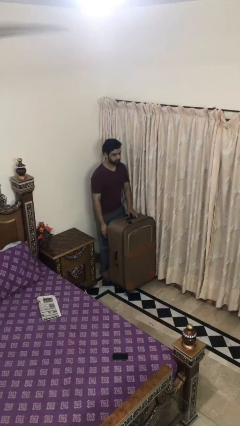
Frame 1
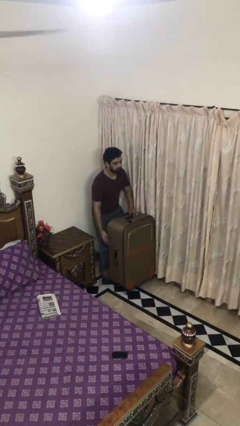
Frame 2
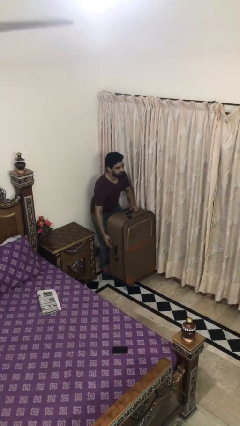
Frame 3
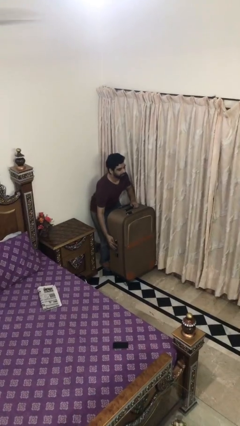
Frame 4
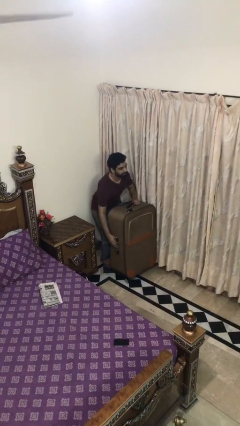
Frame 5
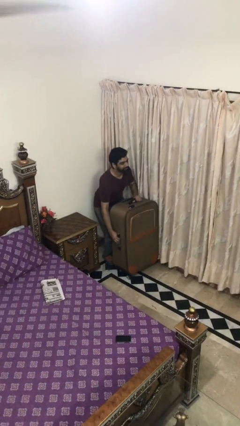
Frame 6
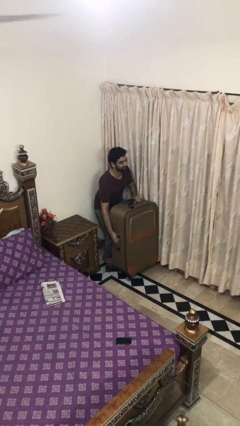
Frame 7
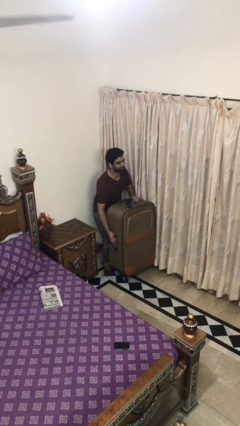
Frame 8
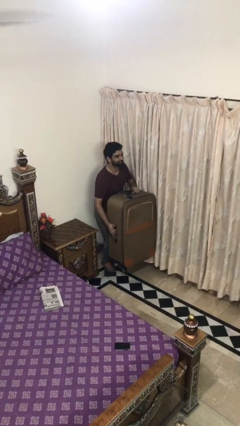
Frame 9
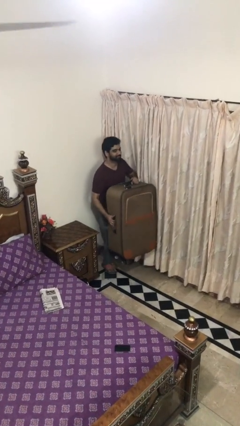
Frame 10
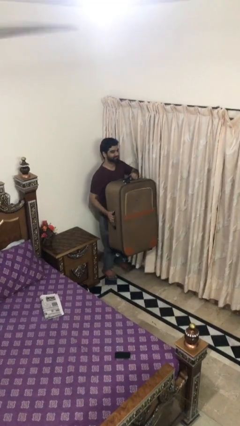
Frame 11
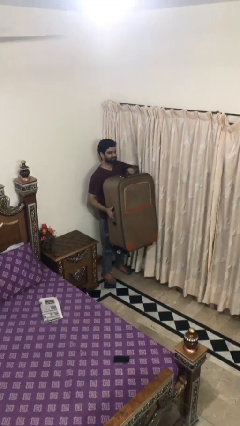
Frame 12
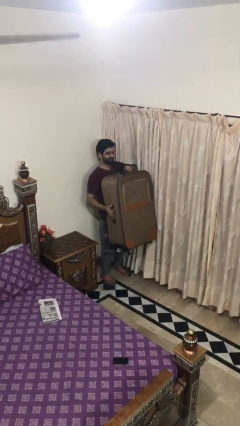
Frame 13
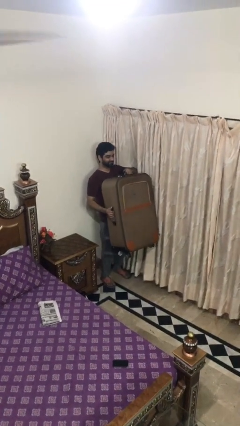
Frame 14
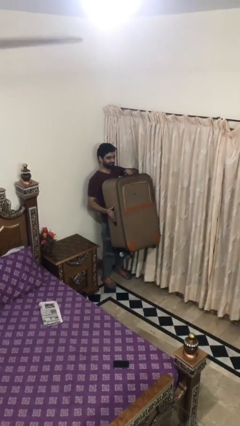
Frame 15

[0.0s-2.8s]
person picks up object from floor

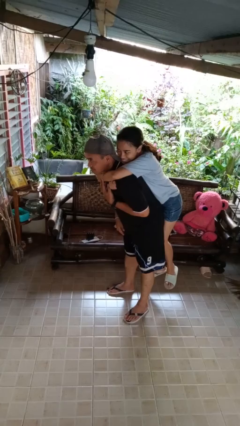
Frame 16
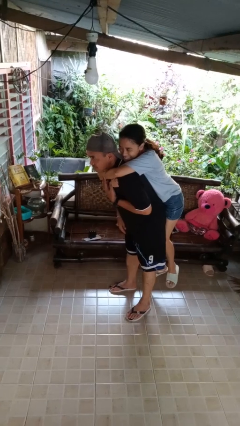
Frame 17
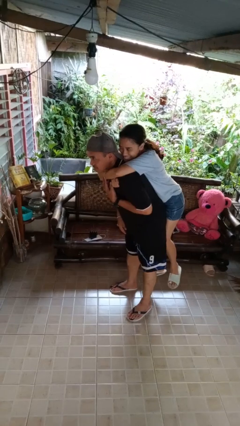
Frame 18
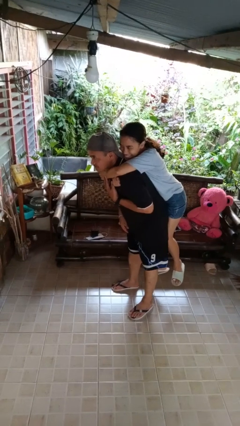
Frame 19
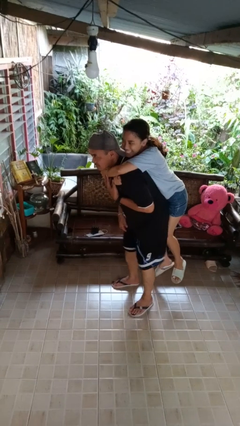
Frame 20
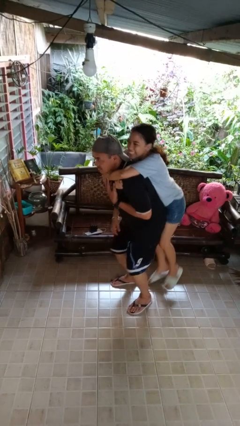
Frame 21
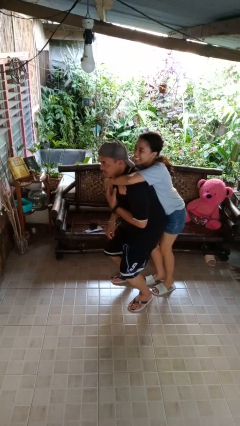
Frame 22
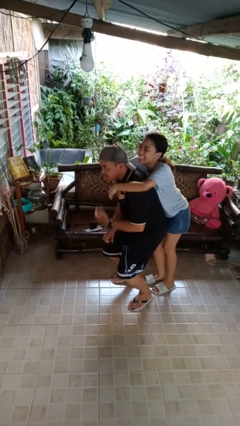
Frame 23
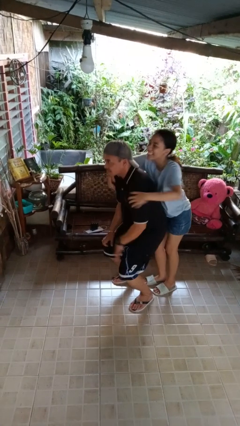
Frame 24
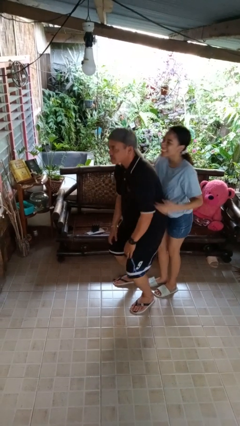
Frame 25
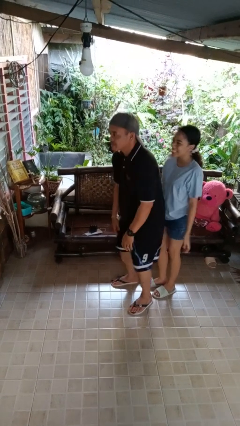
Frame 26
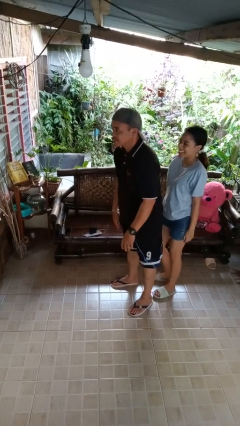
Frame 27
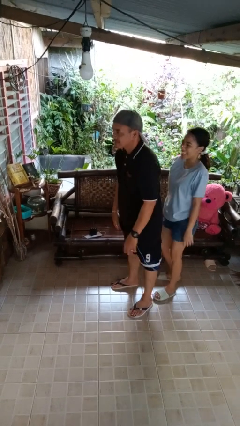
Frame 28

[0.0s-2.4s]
person puts down person

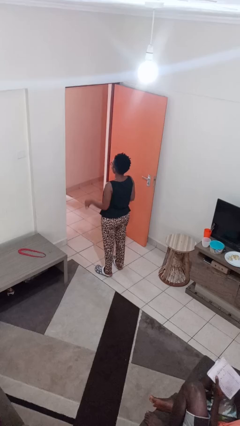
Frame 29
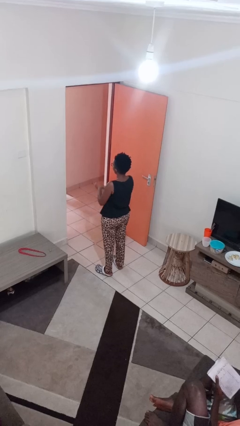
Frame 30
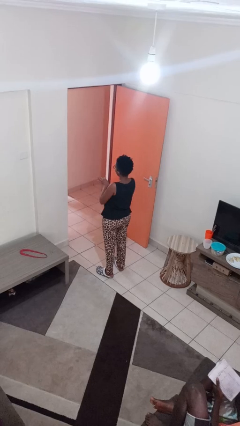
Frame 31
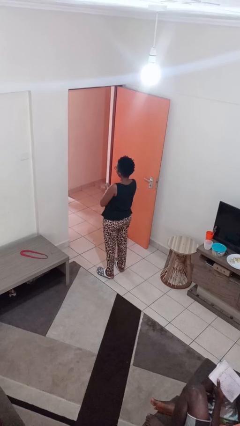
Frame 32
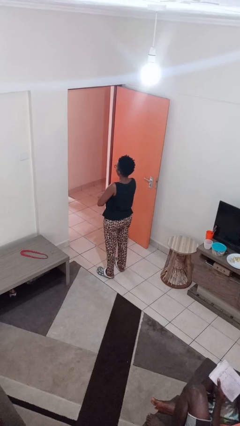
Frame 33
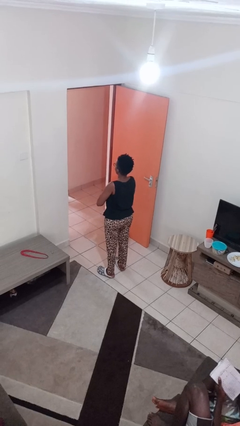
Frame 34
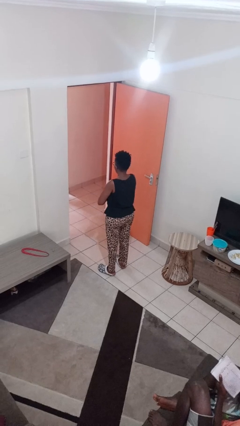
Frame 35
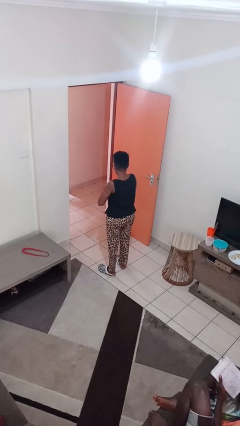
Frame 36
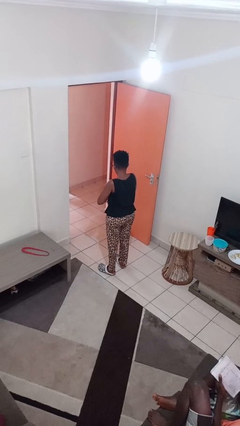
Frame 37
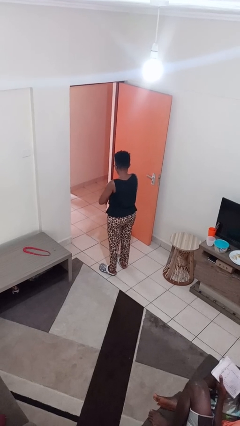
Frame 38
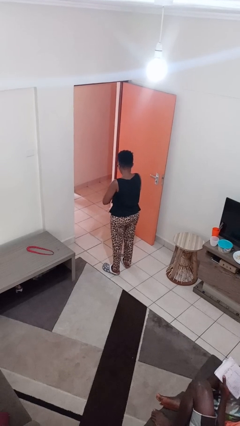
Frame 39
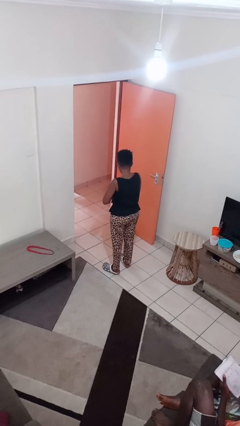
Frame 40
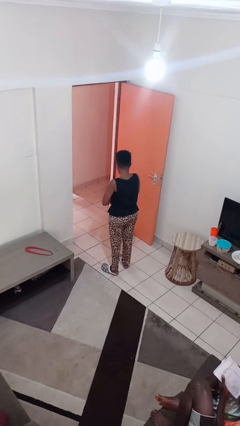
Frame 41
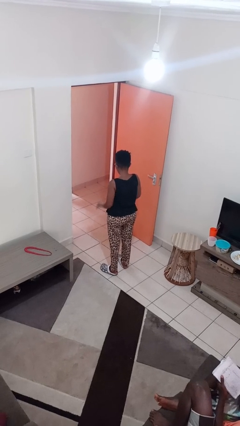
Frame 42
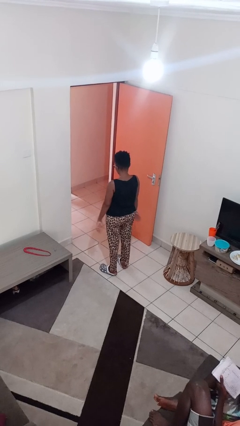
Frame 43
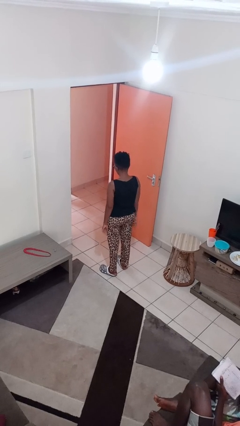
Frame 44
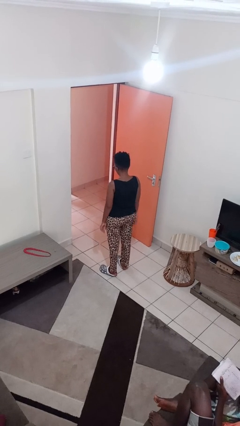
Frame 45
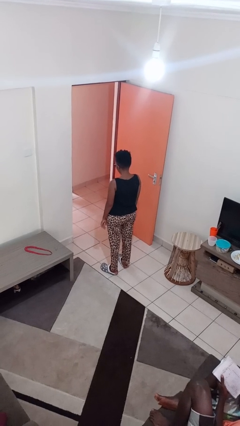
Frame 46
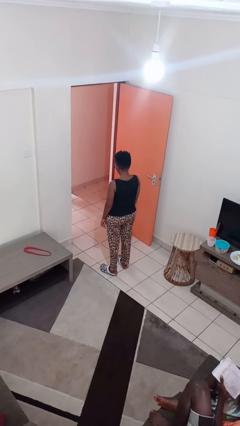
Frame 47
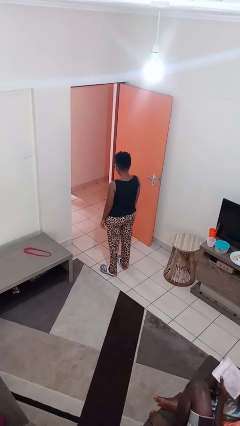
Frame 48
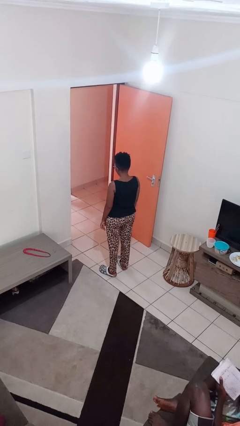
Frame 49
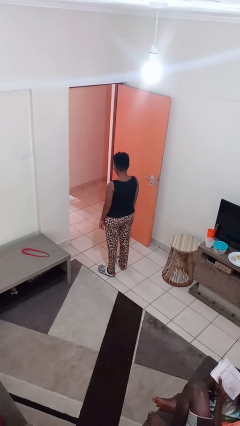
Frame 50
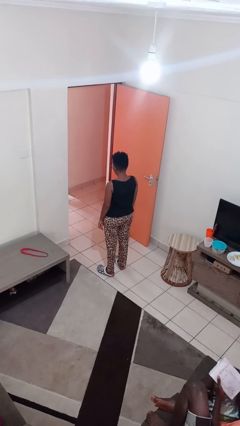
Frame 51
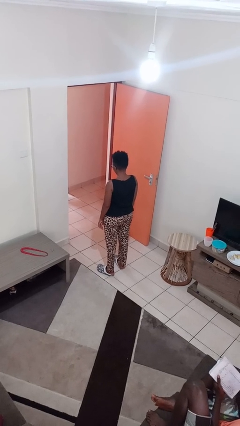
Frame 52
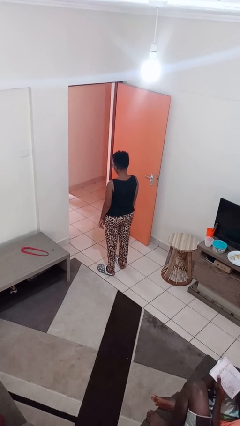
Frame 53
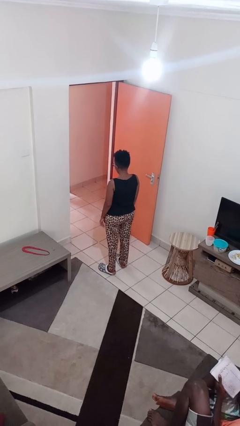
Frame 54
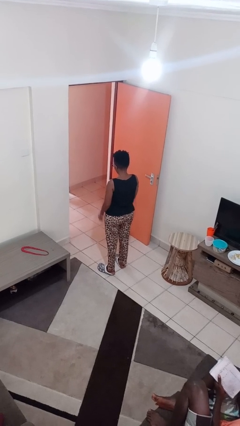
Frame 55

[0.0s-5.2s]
person puts on wristwatch

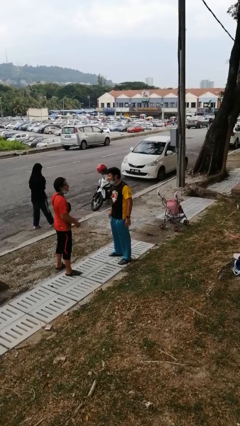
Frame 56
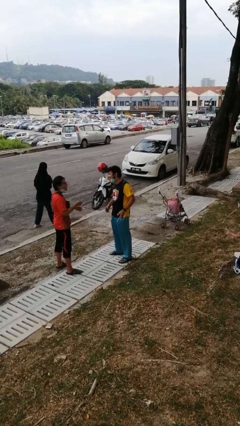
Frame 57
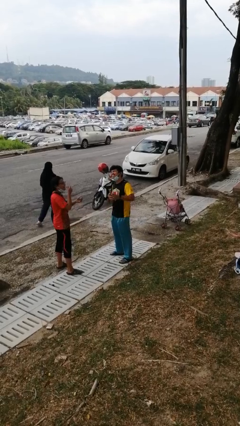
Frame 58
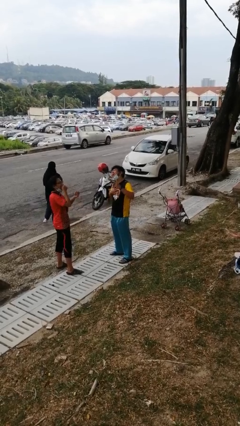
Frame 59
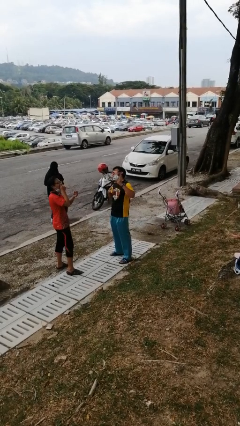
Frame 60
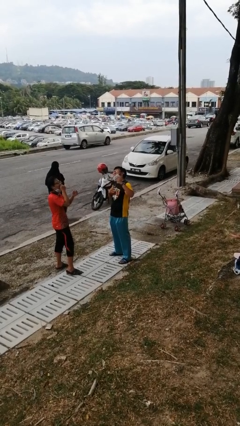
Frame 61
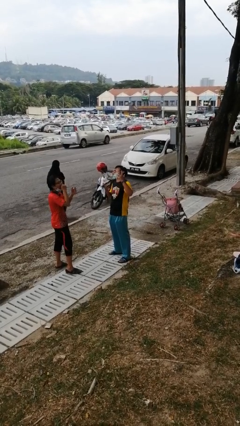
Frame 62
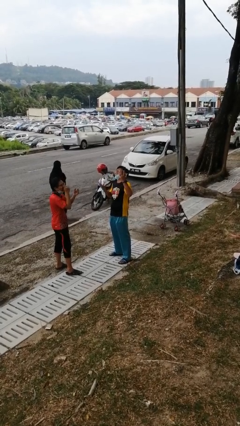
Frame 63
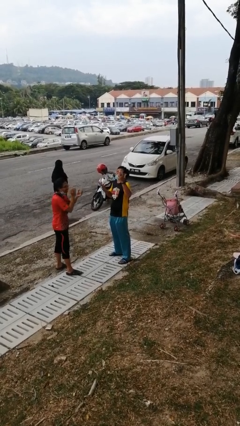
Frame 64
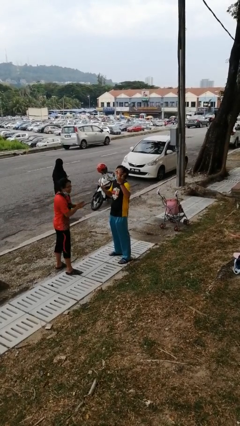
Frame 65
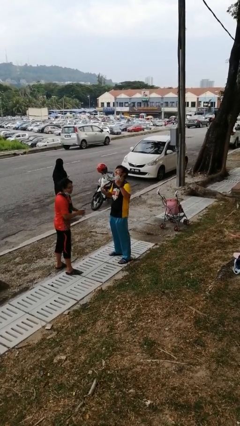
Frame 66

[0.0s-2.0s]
person laughs with person

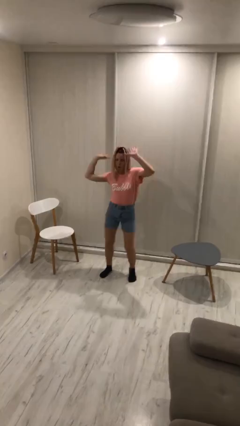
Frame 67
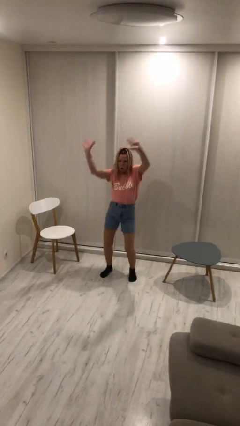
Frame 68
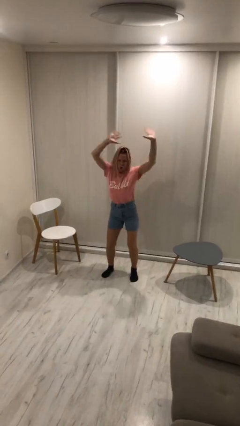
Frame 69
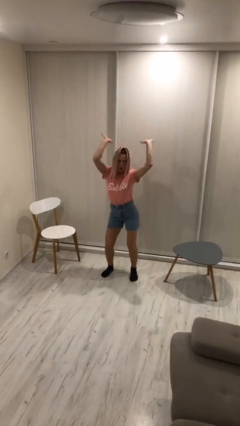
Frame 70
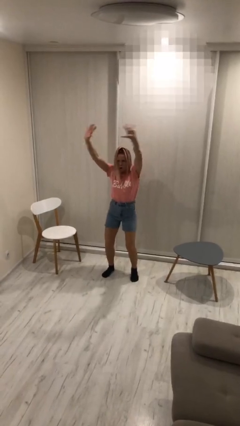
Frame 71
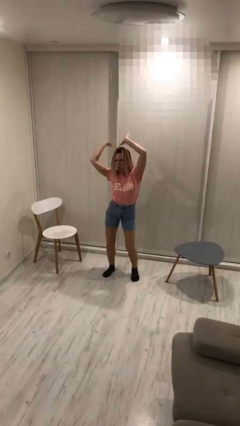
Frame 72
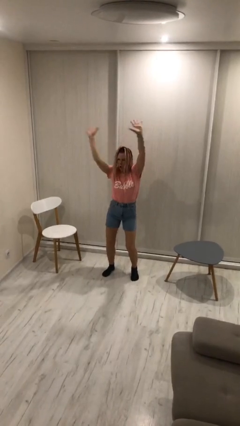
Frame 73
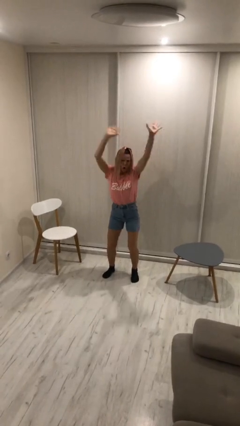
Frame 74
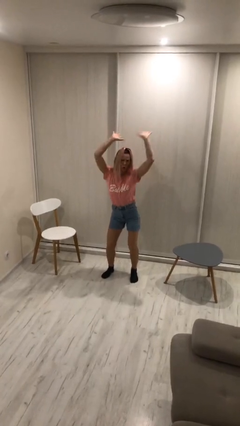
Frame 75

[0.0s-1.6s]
person dances in place

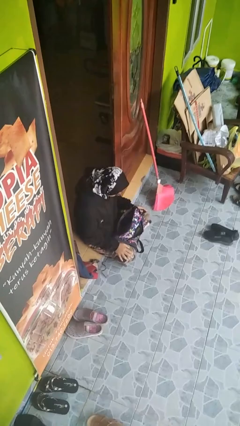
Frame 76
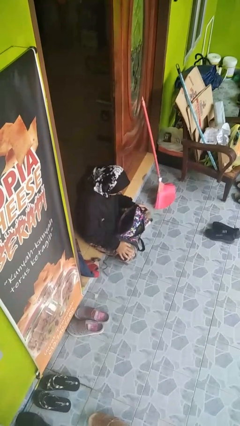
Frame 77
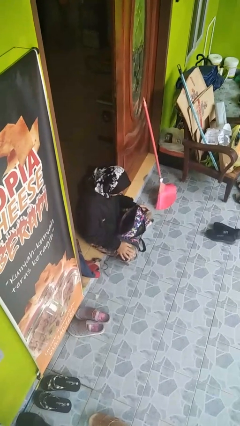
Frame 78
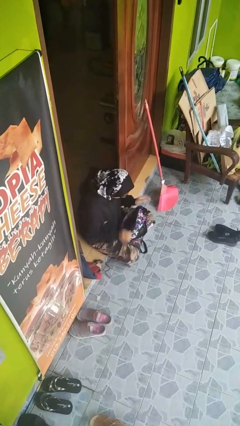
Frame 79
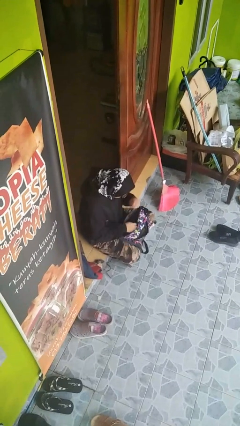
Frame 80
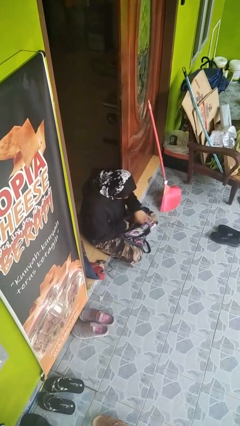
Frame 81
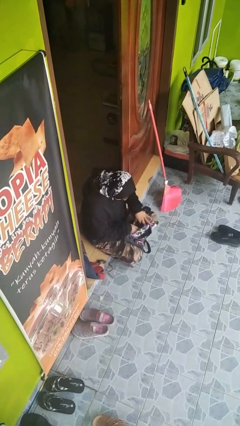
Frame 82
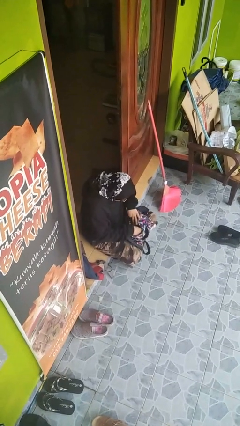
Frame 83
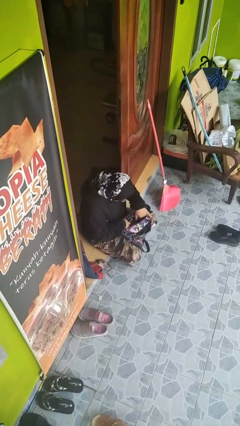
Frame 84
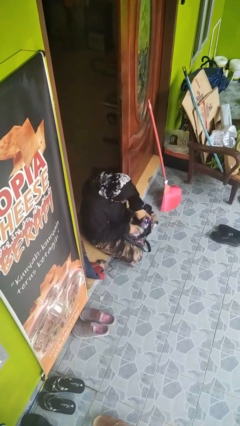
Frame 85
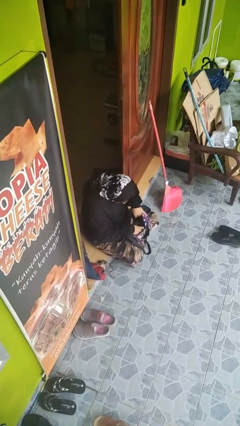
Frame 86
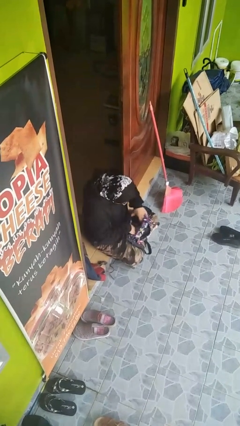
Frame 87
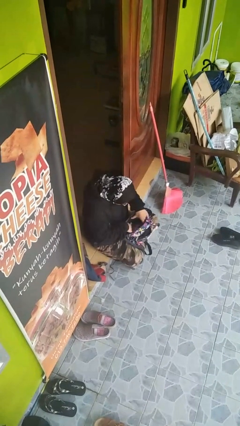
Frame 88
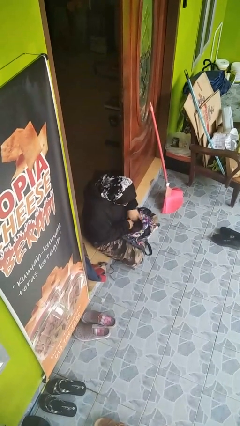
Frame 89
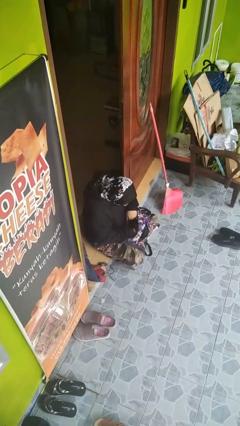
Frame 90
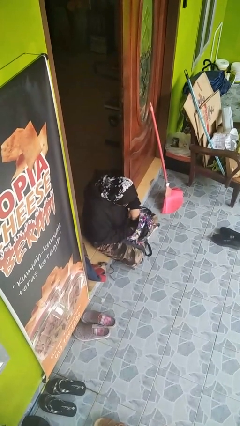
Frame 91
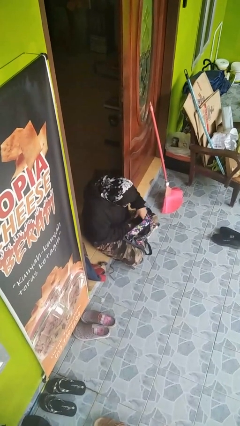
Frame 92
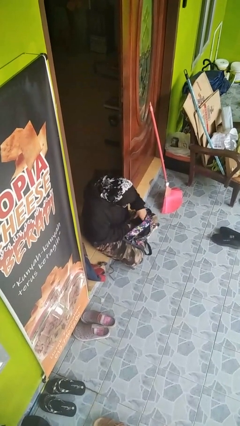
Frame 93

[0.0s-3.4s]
person searches in purse

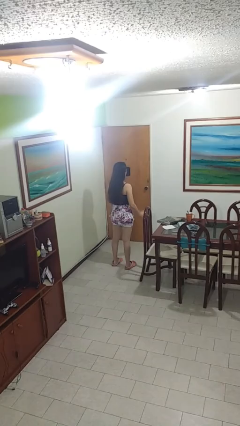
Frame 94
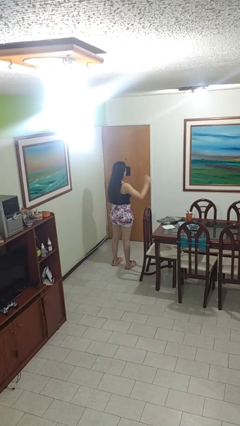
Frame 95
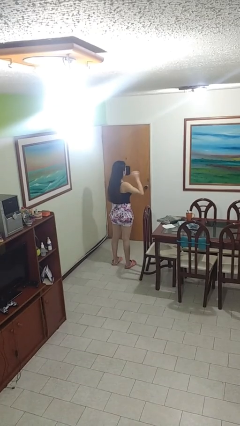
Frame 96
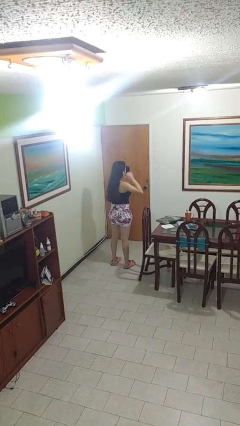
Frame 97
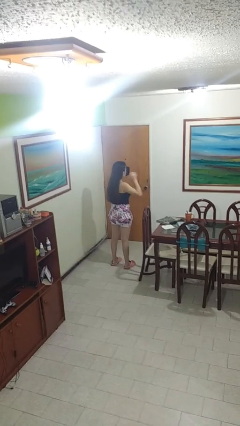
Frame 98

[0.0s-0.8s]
person gestures behind me
